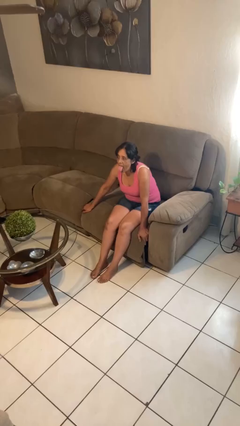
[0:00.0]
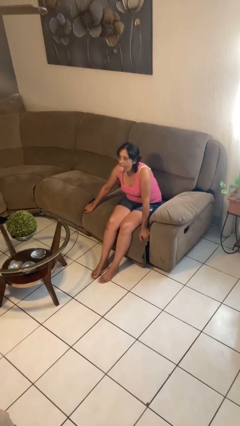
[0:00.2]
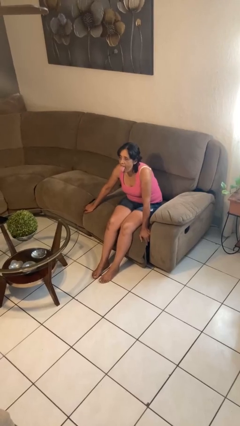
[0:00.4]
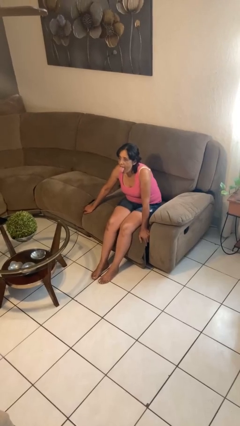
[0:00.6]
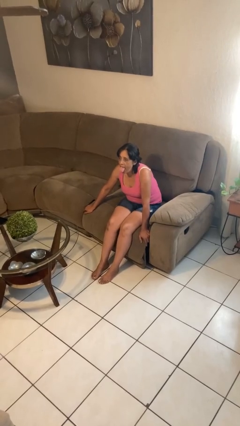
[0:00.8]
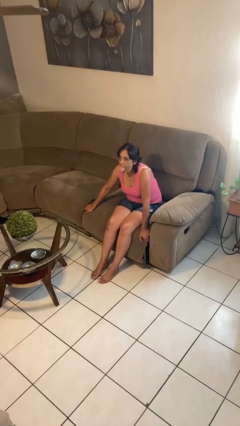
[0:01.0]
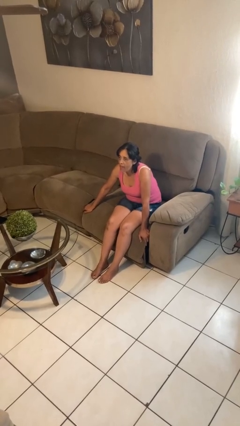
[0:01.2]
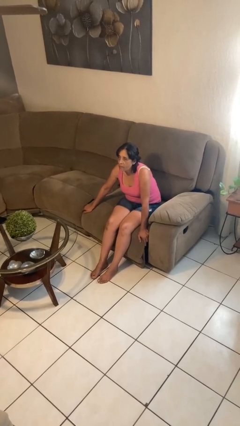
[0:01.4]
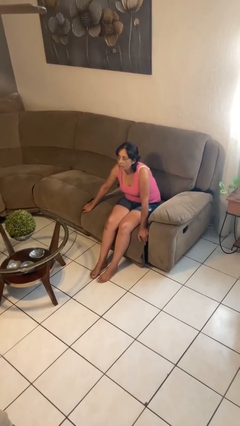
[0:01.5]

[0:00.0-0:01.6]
person sticks out tongue

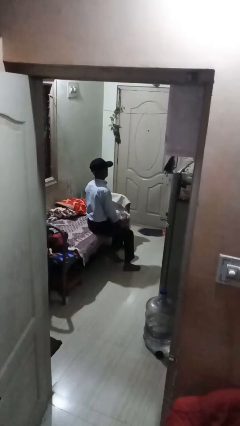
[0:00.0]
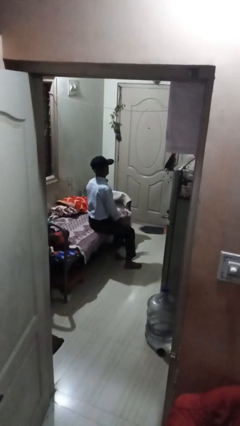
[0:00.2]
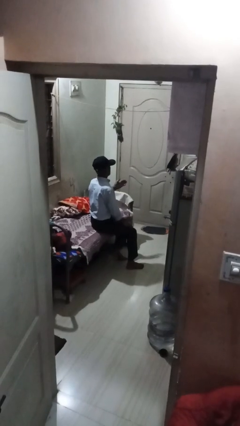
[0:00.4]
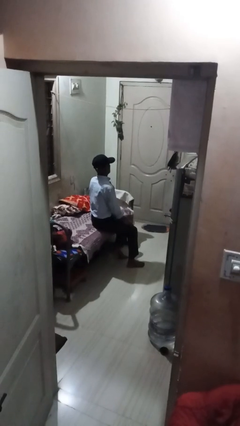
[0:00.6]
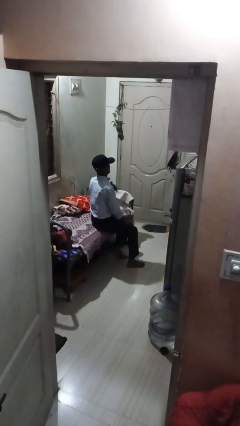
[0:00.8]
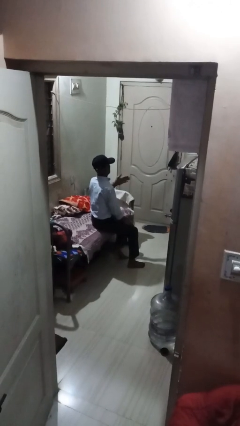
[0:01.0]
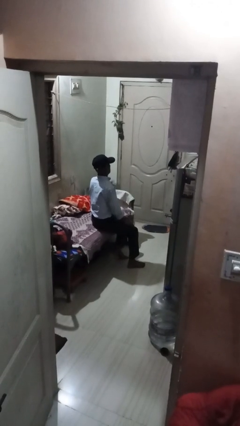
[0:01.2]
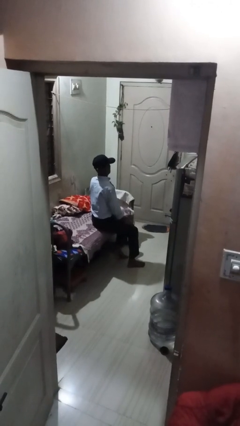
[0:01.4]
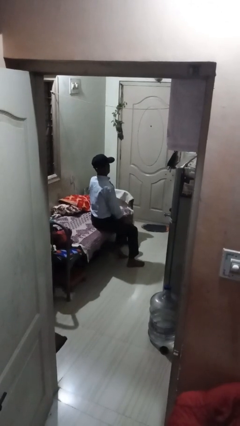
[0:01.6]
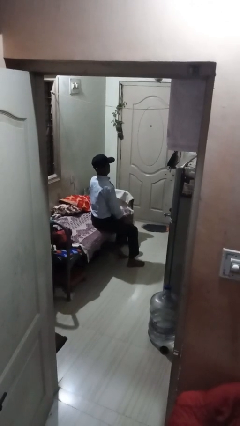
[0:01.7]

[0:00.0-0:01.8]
person drums on chest

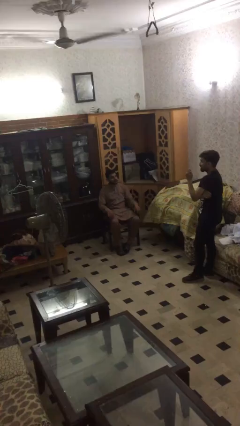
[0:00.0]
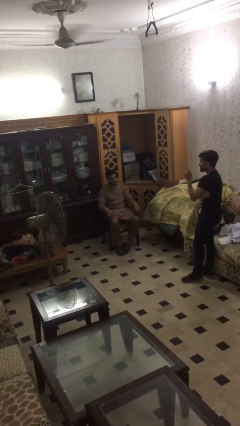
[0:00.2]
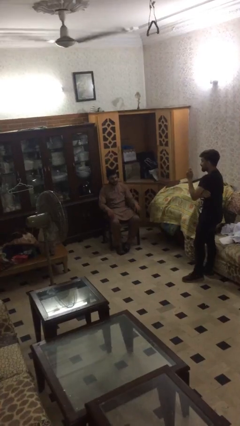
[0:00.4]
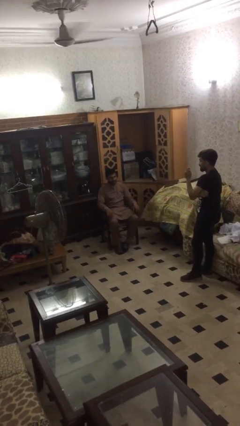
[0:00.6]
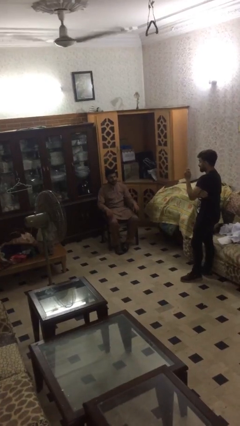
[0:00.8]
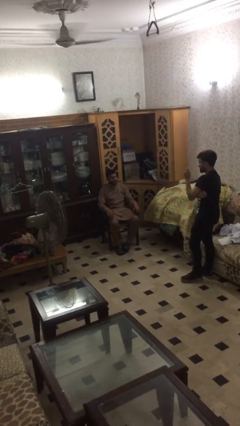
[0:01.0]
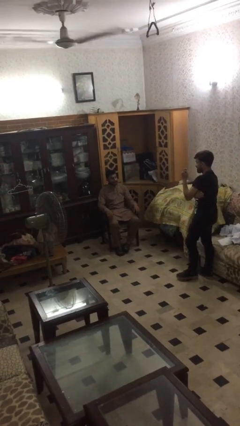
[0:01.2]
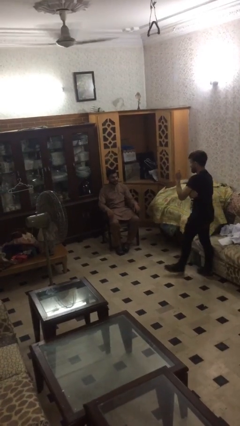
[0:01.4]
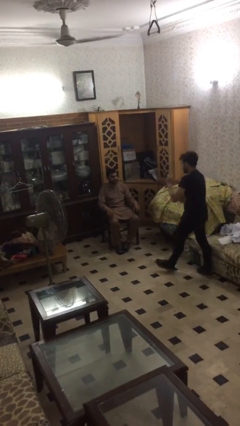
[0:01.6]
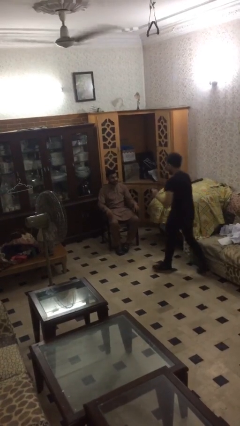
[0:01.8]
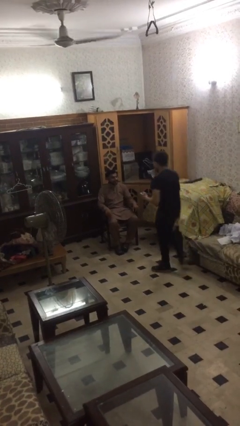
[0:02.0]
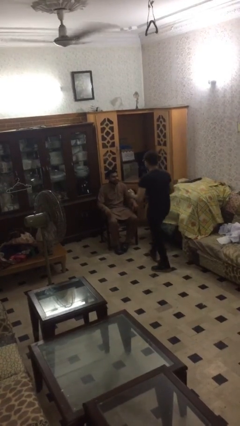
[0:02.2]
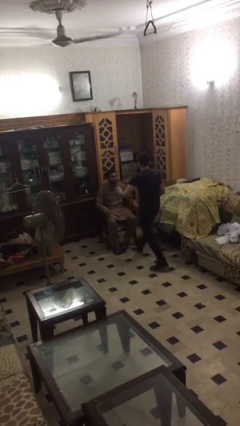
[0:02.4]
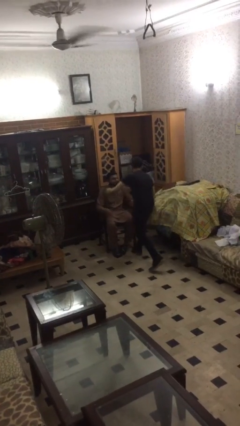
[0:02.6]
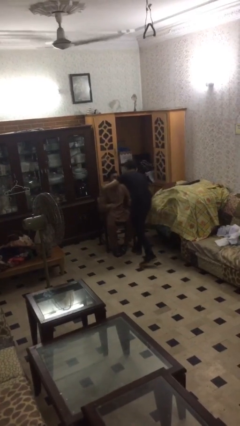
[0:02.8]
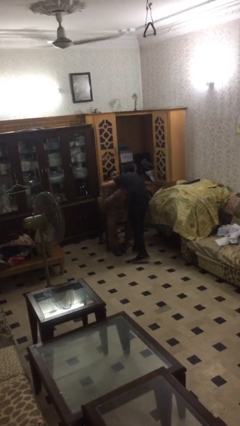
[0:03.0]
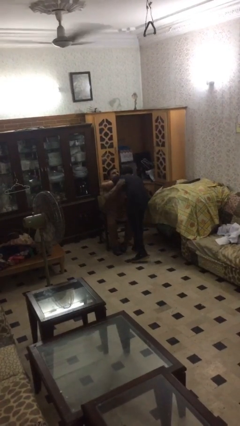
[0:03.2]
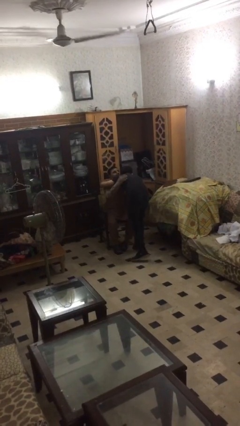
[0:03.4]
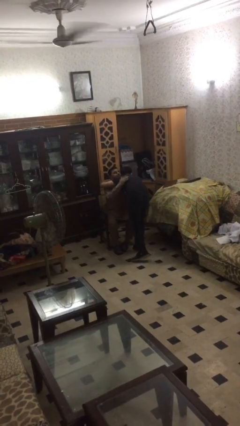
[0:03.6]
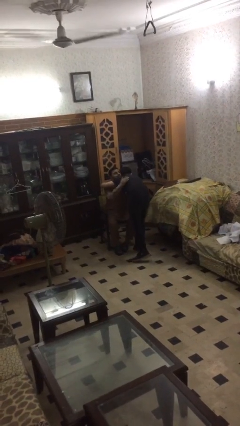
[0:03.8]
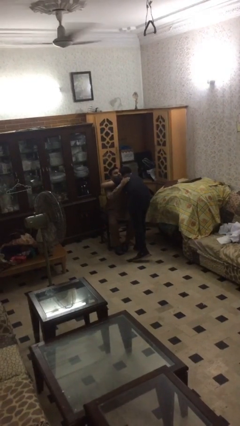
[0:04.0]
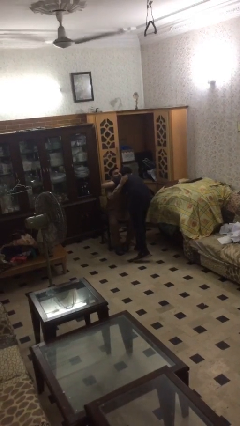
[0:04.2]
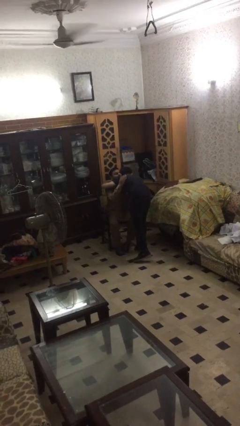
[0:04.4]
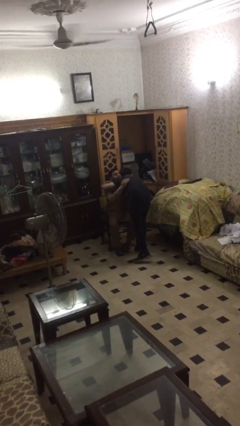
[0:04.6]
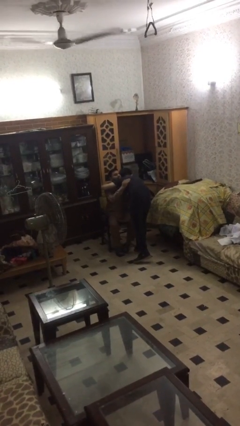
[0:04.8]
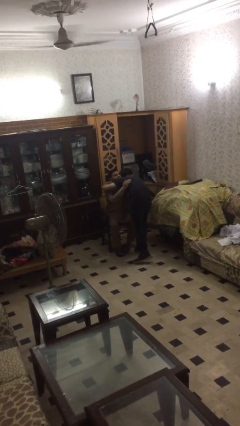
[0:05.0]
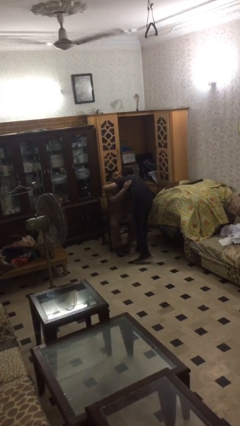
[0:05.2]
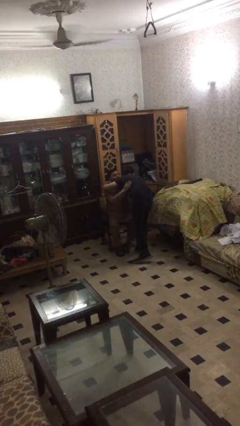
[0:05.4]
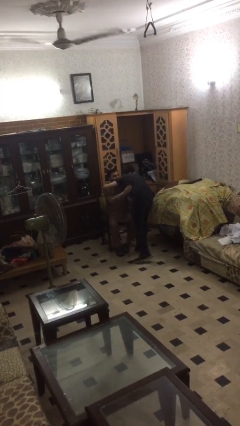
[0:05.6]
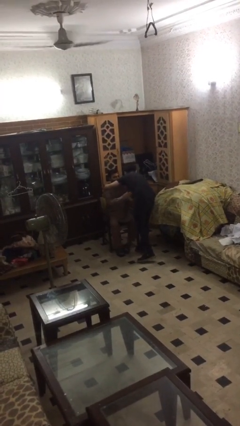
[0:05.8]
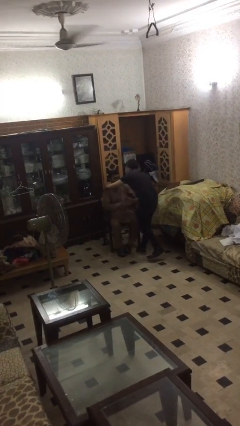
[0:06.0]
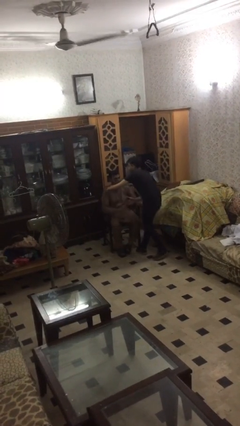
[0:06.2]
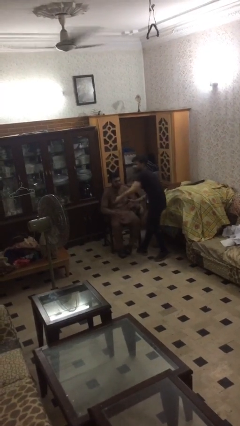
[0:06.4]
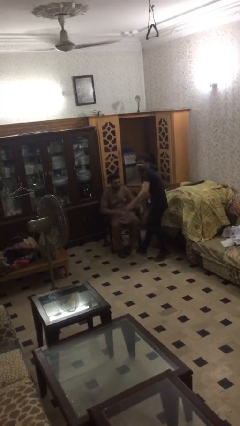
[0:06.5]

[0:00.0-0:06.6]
person embraces person
